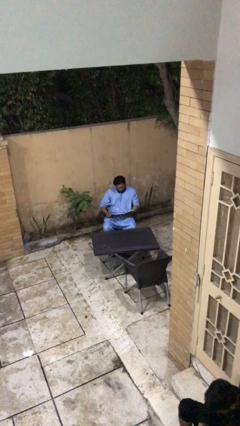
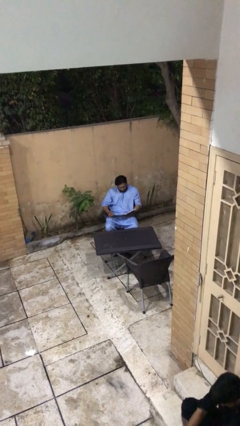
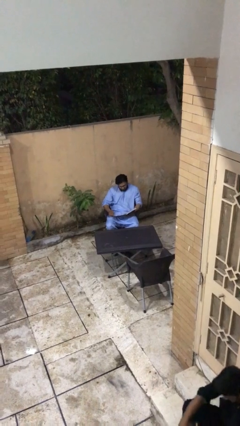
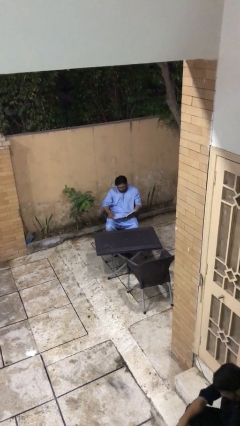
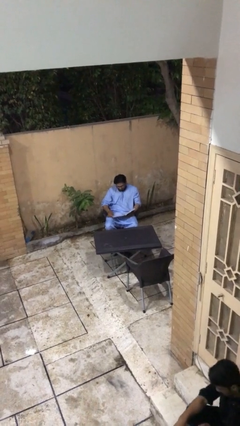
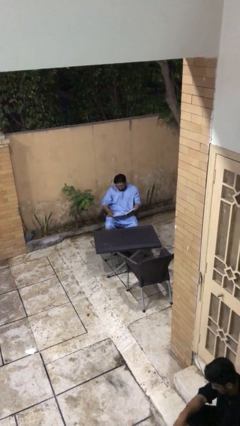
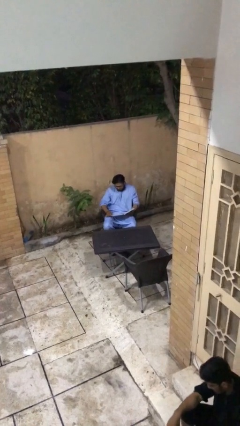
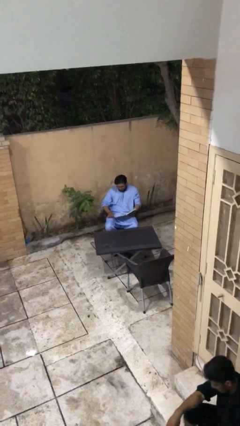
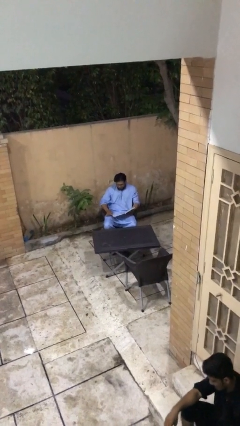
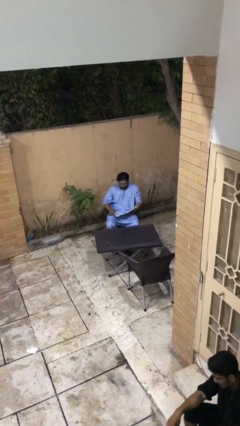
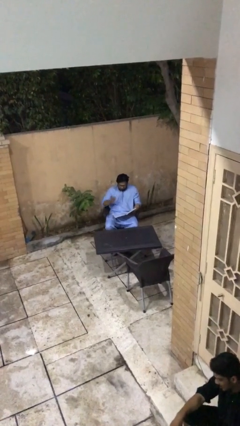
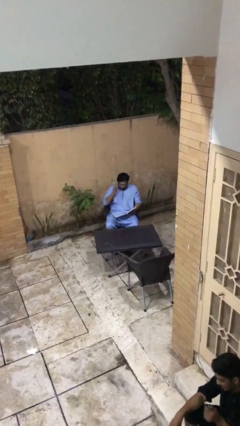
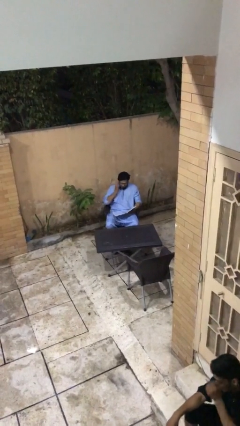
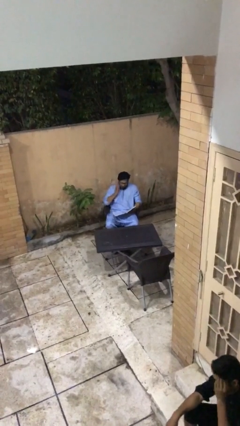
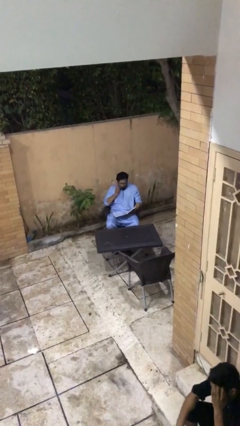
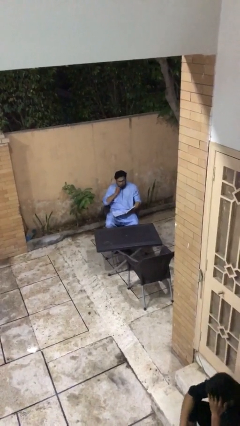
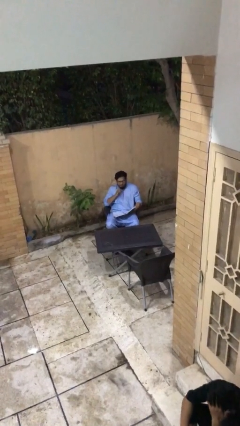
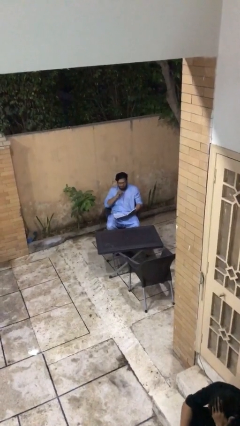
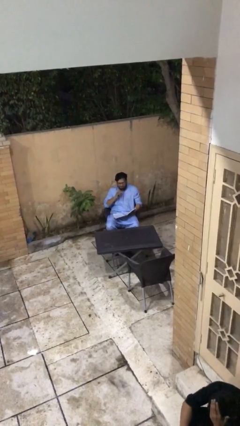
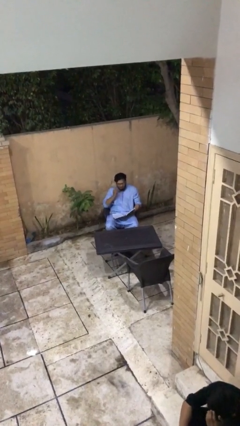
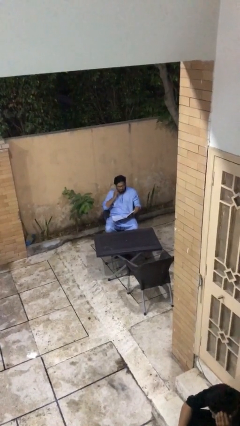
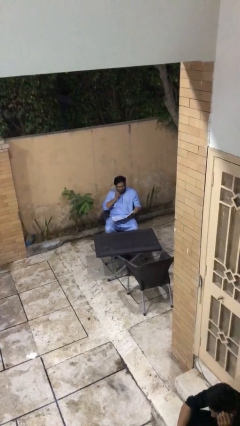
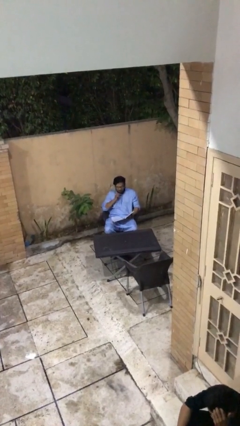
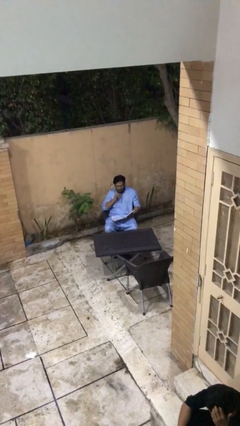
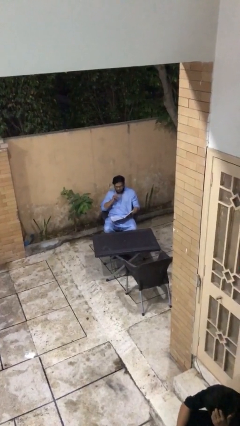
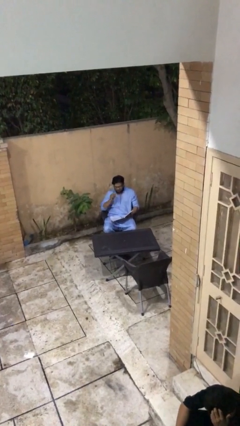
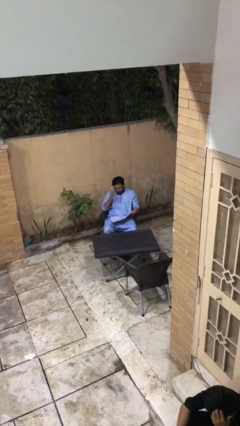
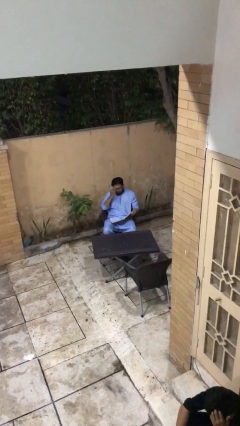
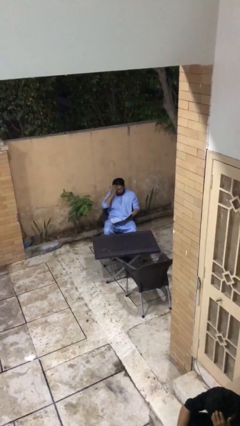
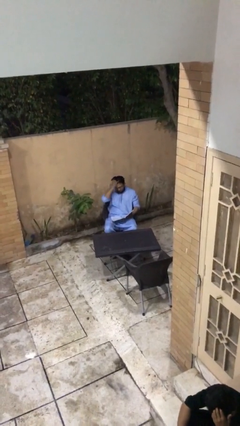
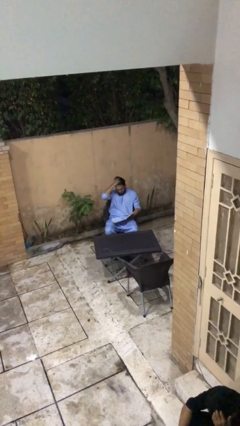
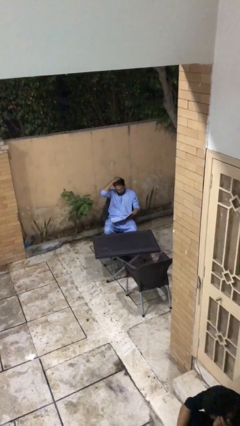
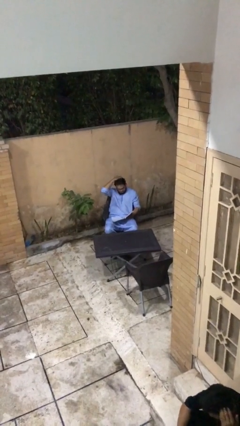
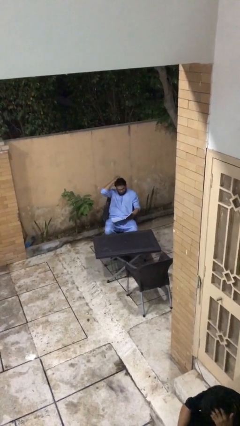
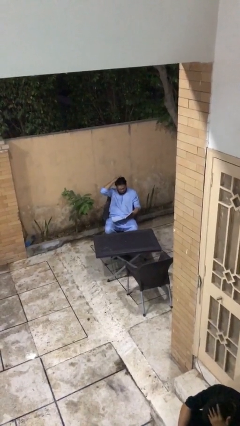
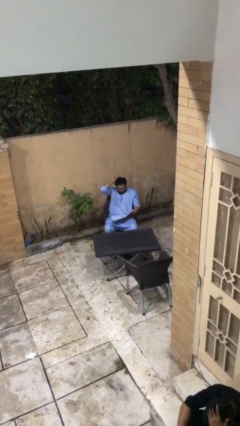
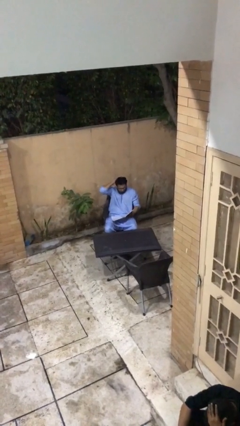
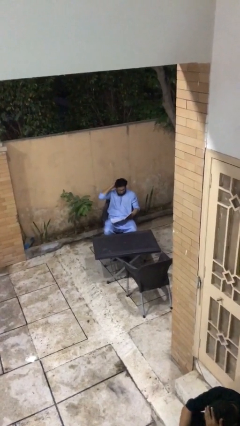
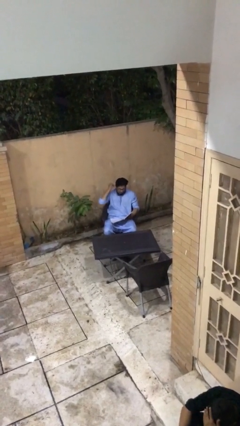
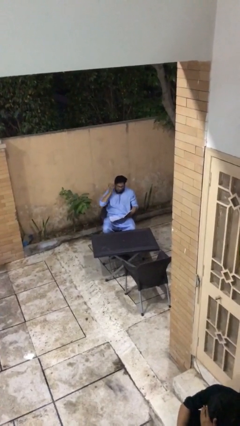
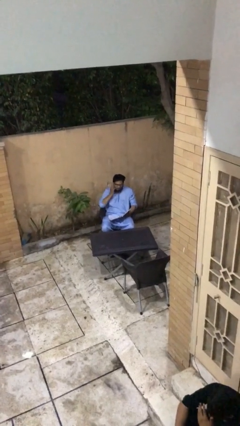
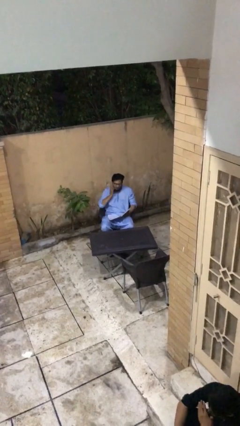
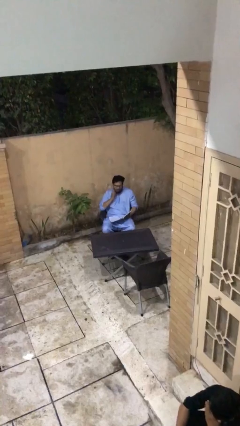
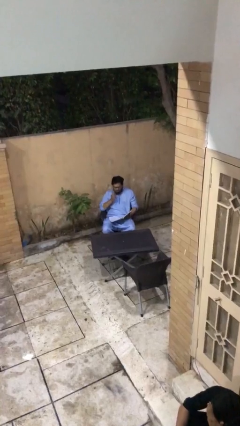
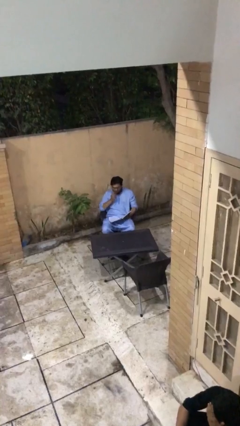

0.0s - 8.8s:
person reads document

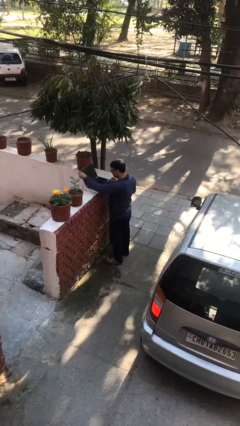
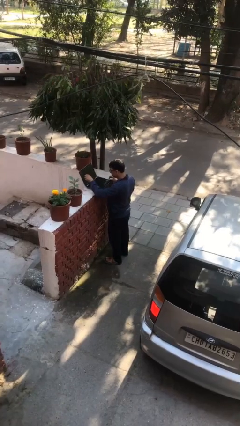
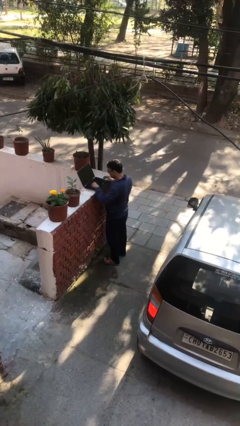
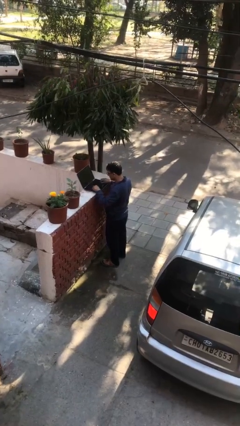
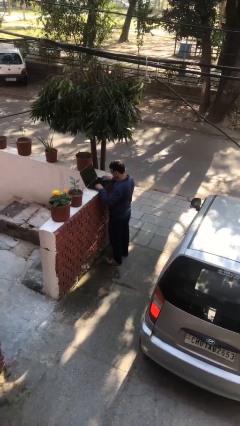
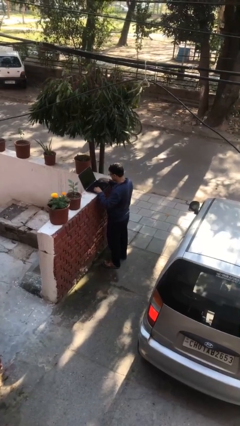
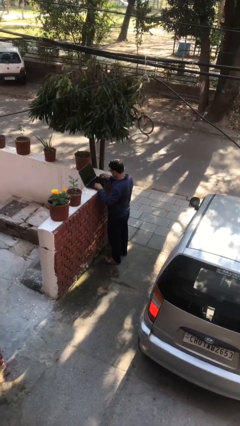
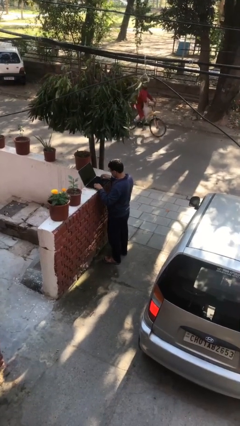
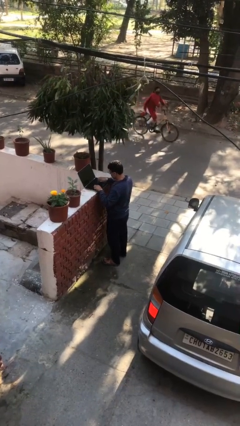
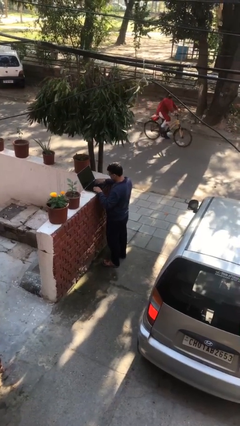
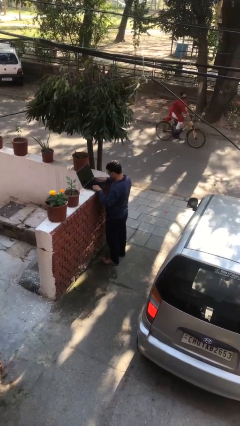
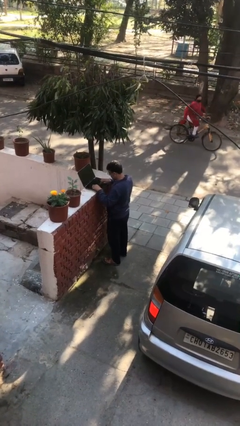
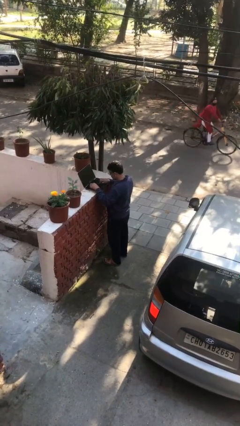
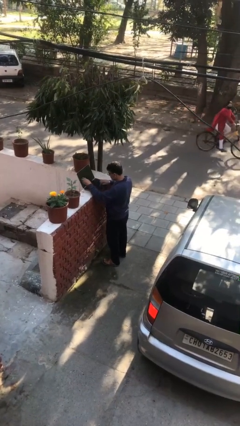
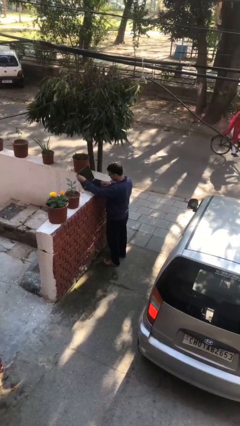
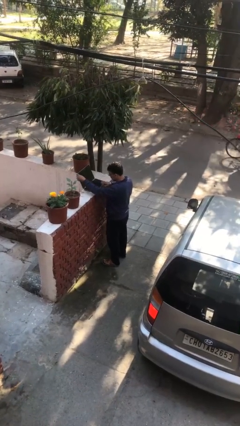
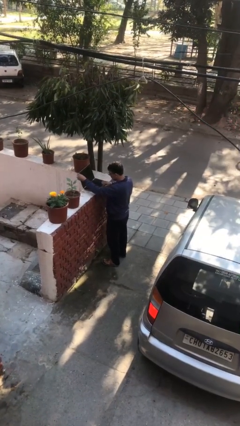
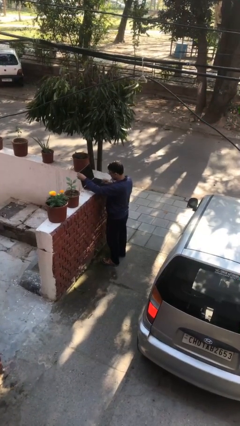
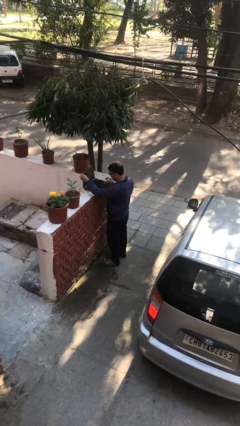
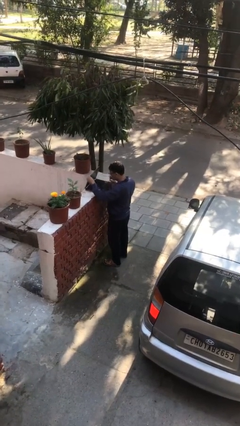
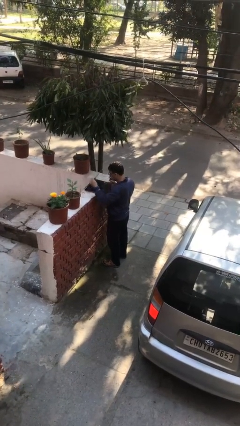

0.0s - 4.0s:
person interacts with laptop

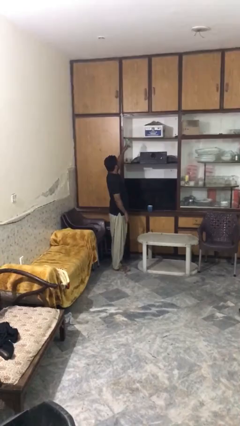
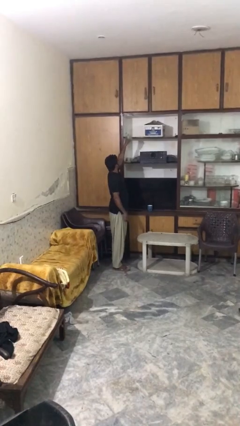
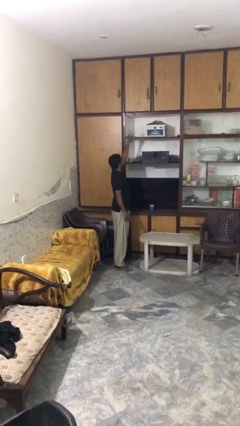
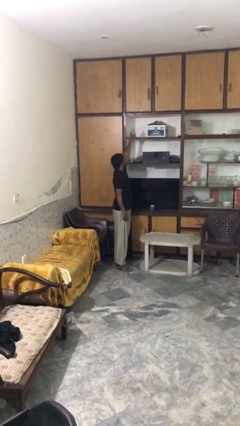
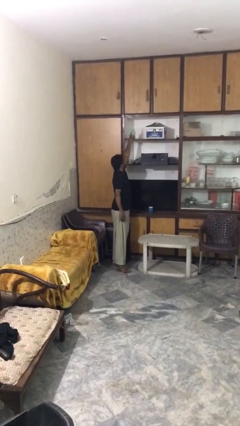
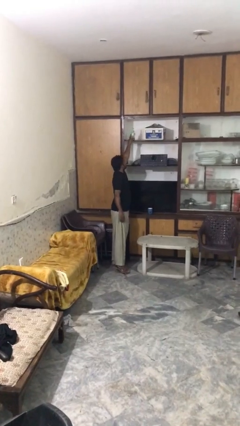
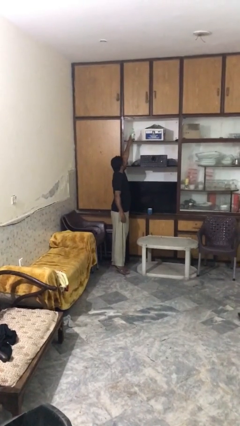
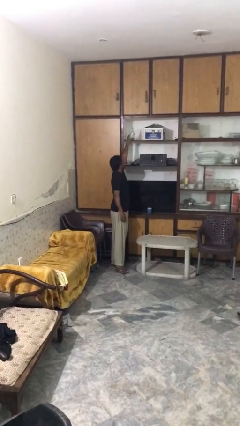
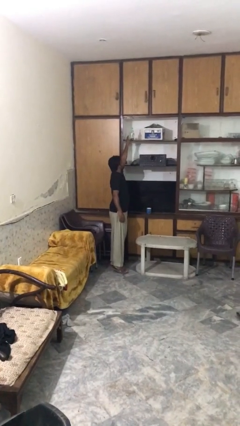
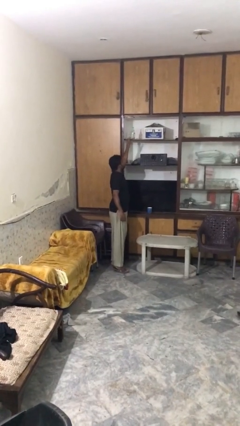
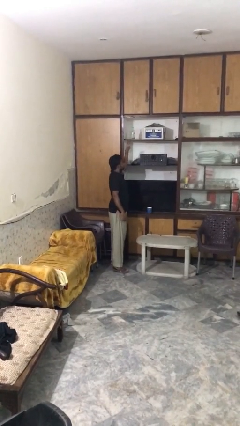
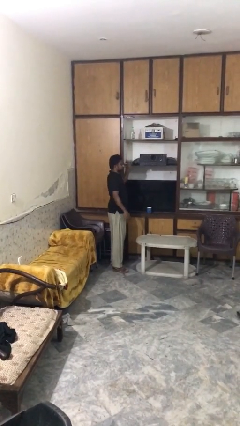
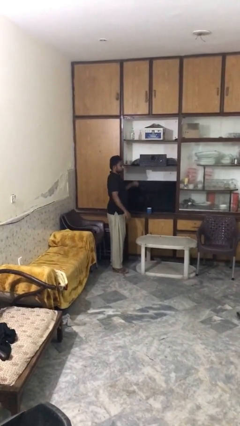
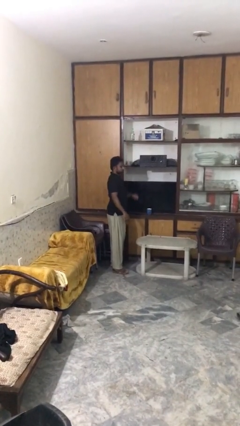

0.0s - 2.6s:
person puts down object on shelf

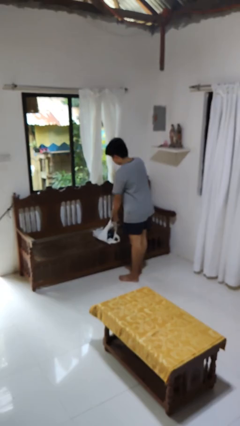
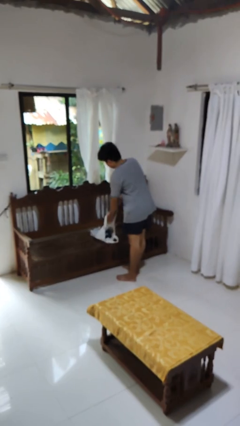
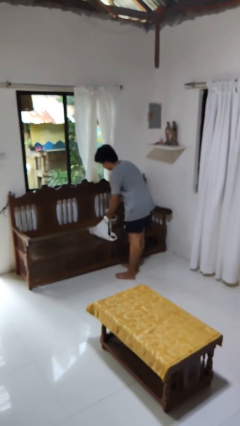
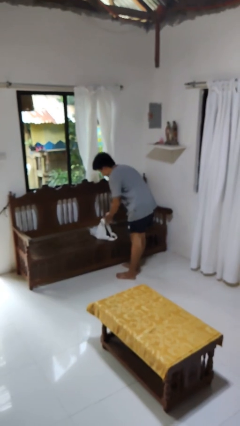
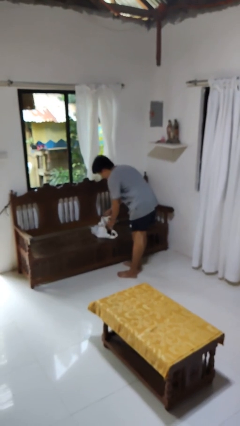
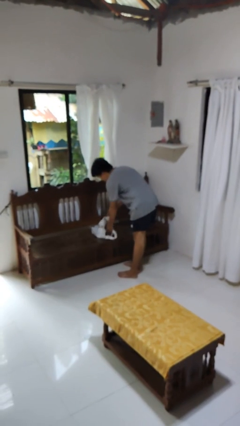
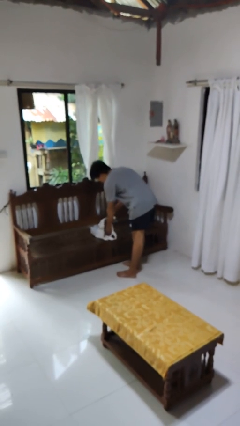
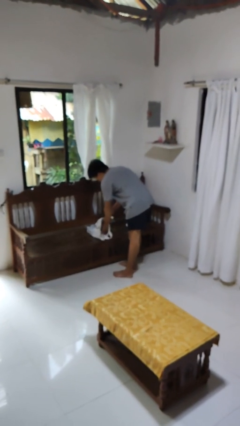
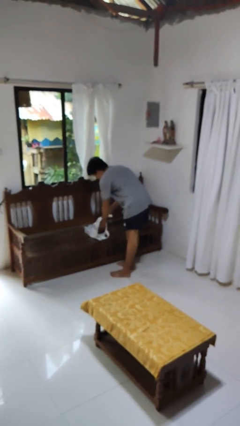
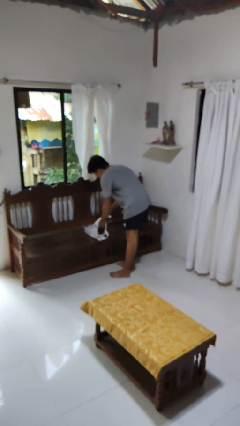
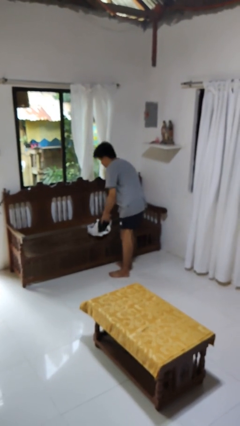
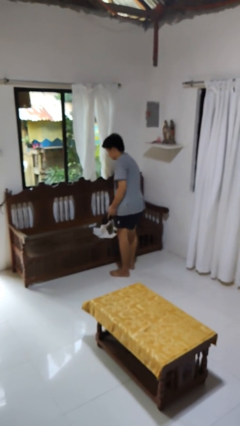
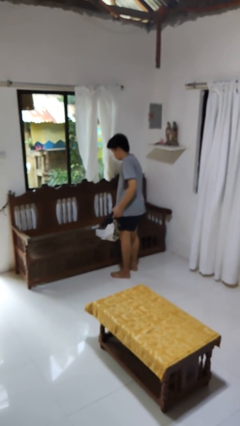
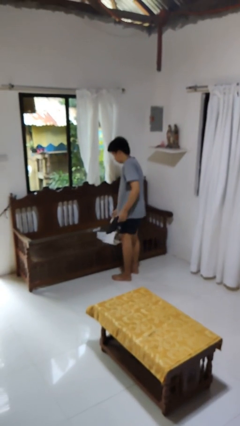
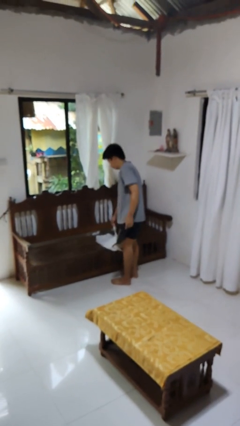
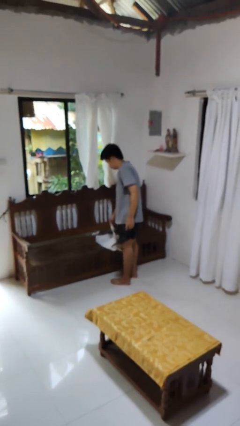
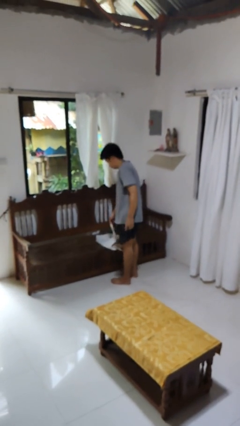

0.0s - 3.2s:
person takes object from bag
